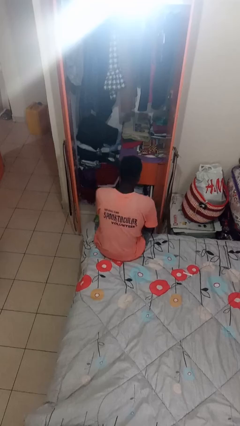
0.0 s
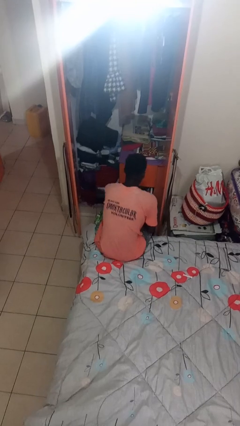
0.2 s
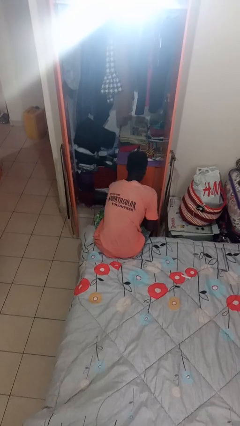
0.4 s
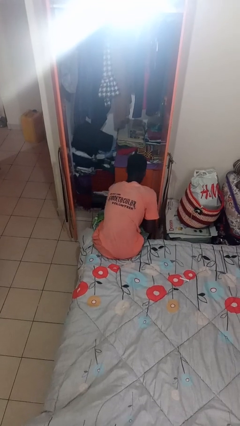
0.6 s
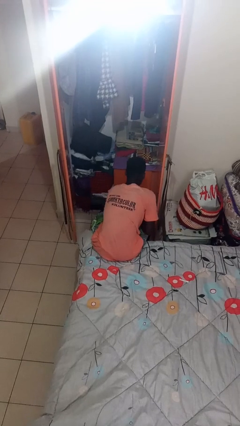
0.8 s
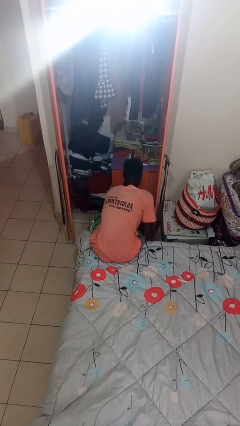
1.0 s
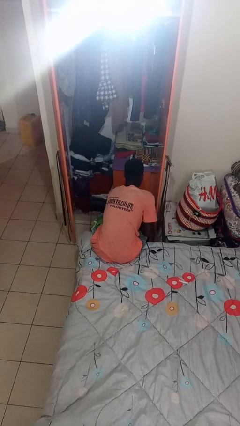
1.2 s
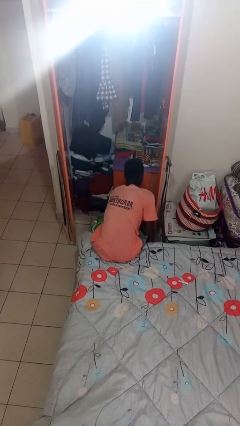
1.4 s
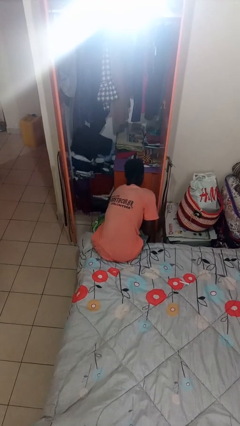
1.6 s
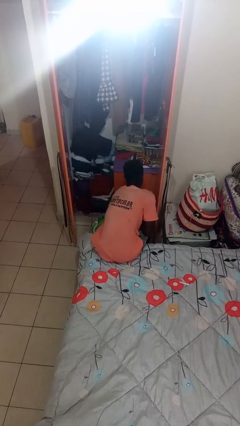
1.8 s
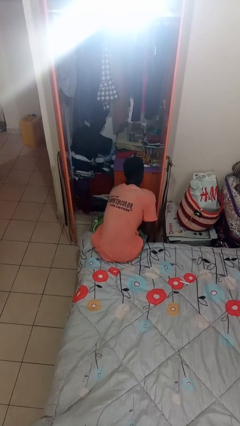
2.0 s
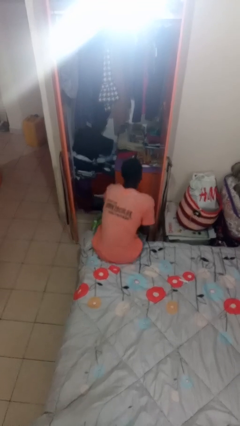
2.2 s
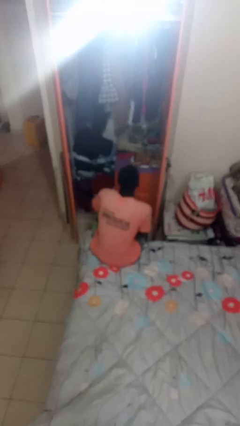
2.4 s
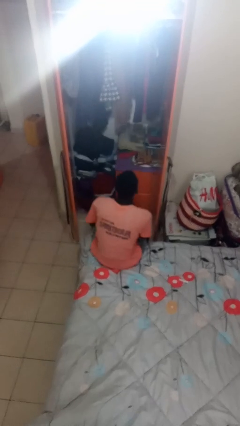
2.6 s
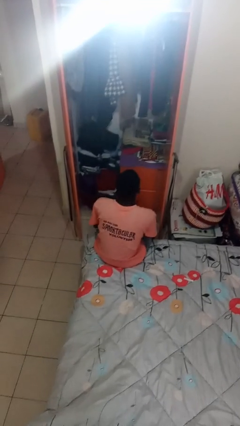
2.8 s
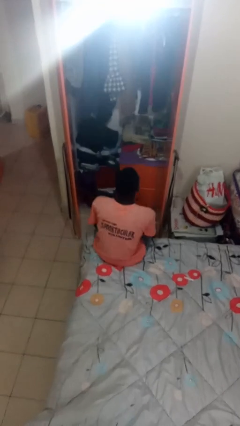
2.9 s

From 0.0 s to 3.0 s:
person closes dresser drawer

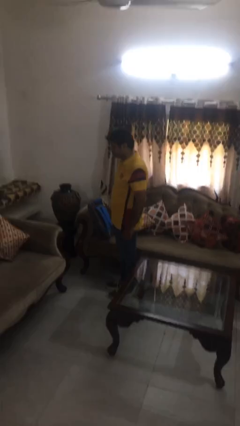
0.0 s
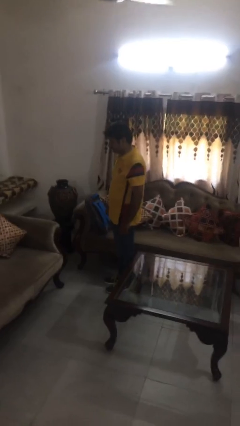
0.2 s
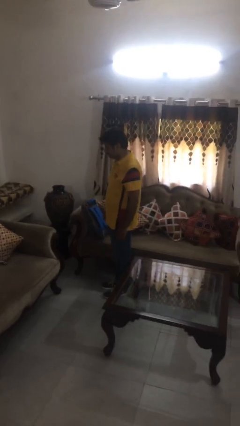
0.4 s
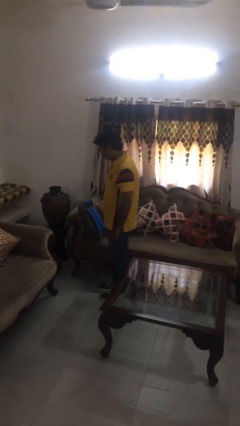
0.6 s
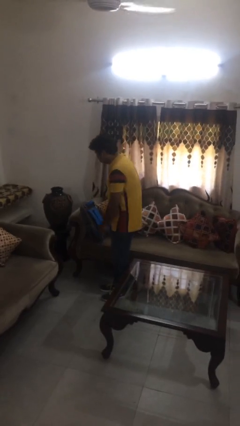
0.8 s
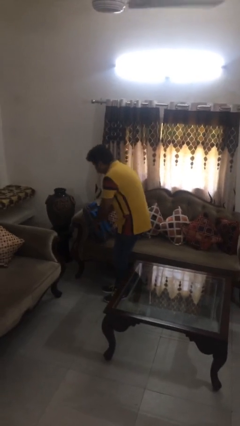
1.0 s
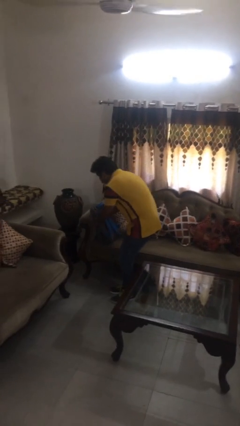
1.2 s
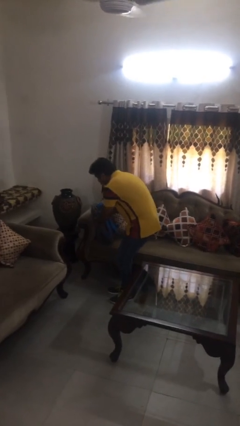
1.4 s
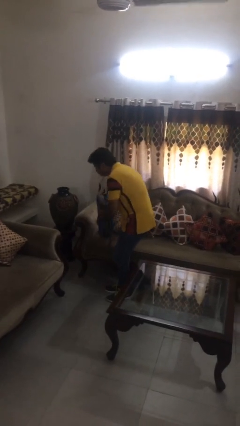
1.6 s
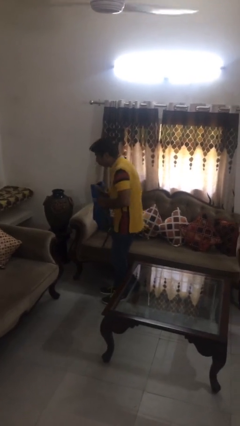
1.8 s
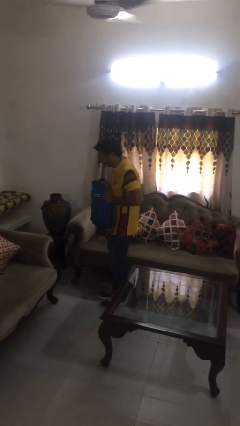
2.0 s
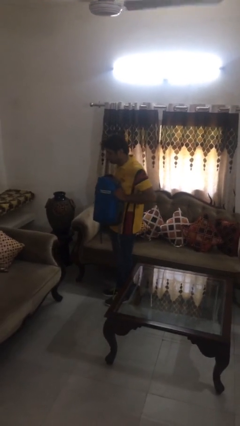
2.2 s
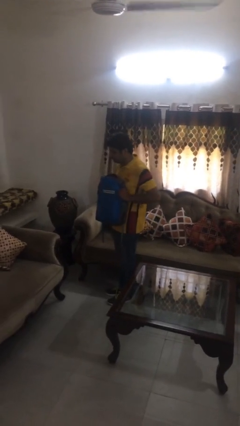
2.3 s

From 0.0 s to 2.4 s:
person picks up object from couch

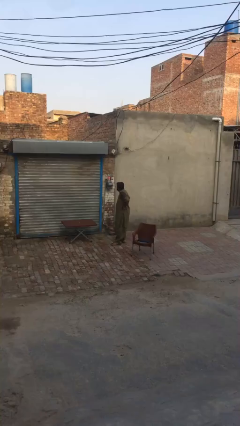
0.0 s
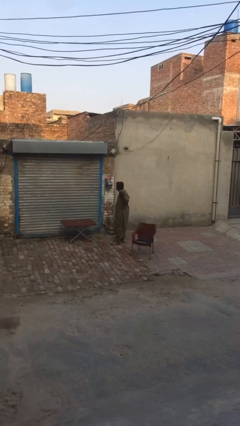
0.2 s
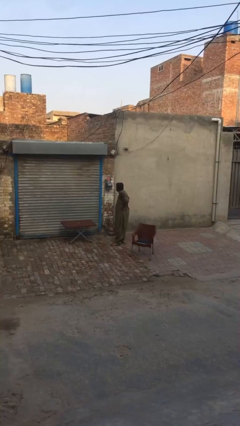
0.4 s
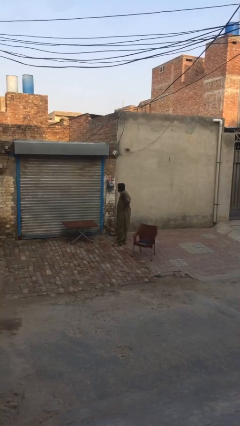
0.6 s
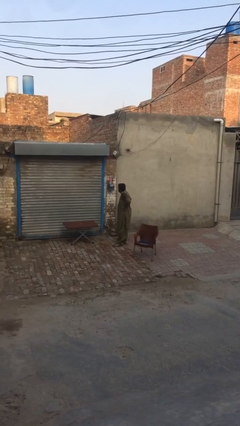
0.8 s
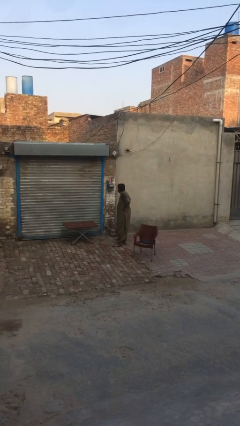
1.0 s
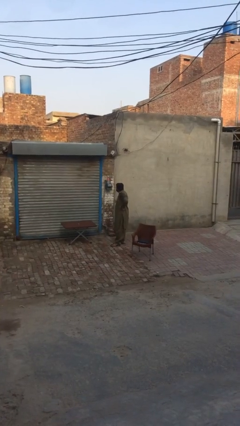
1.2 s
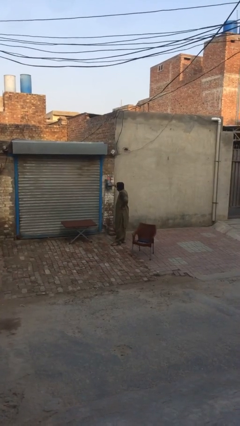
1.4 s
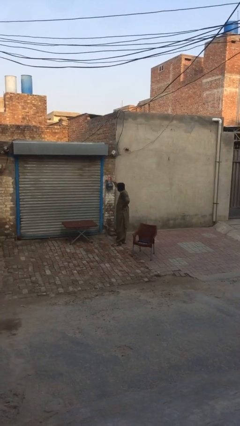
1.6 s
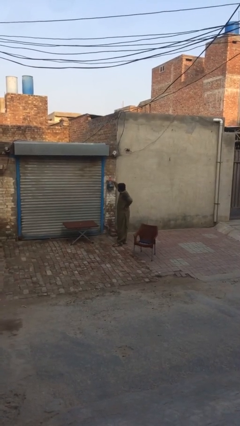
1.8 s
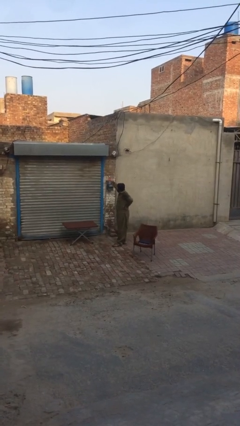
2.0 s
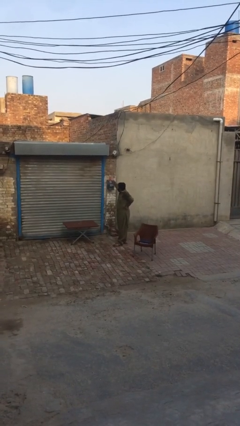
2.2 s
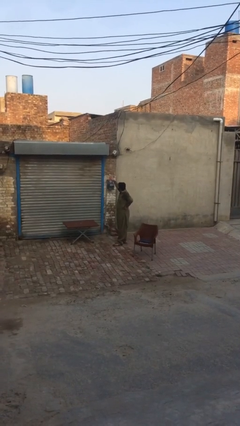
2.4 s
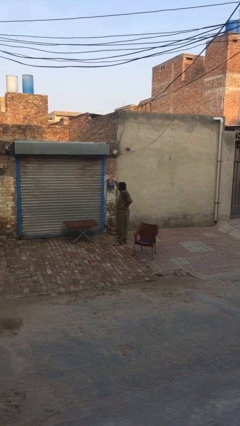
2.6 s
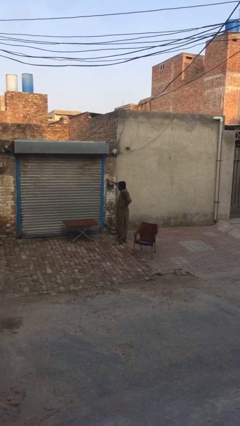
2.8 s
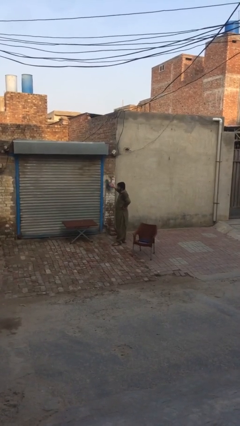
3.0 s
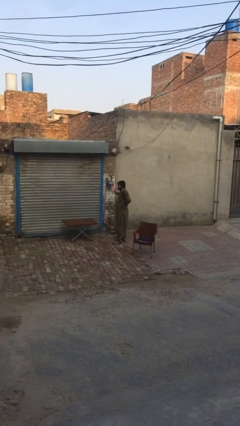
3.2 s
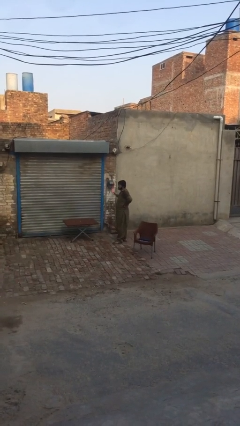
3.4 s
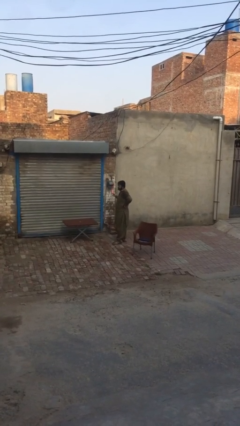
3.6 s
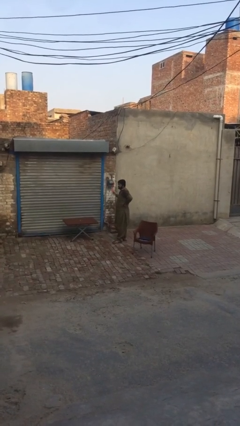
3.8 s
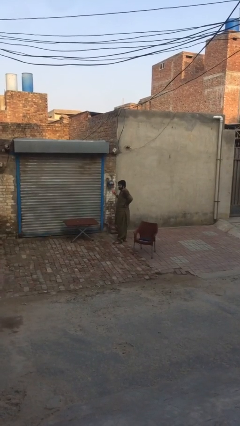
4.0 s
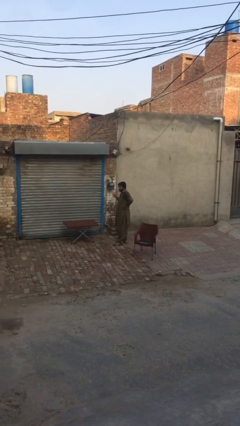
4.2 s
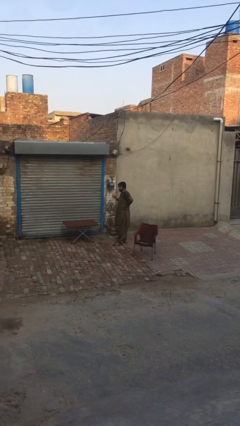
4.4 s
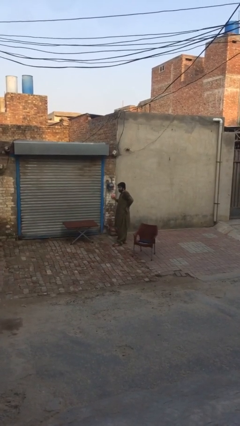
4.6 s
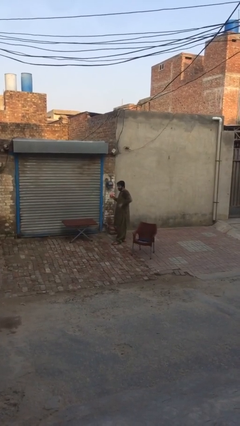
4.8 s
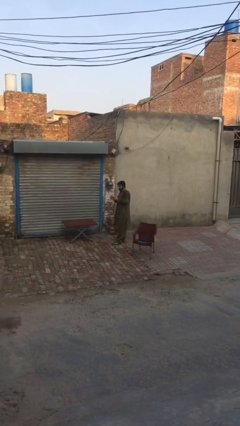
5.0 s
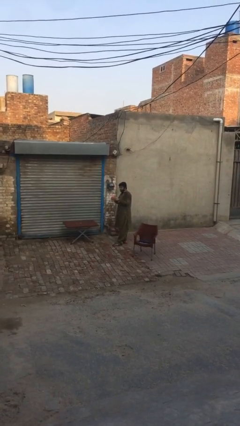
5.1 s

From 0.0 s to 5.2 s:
person picks up object from shelf

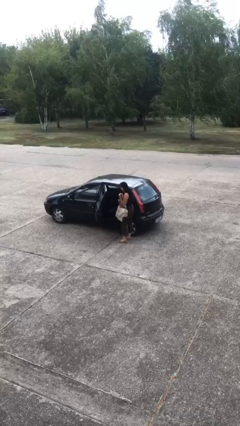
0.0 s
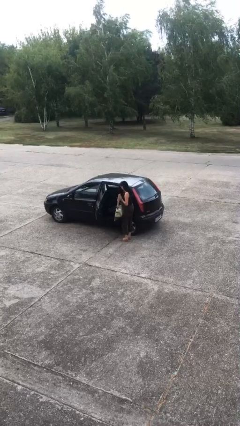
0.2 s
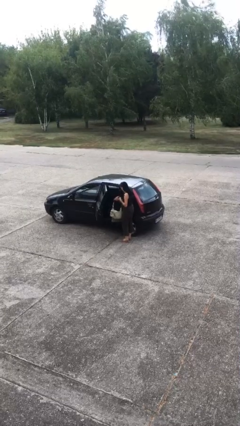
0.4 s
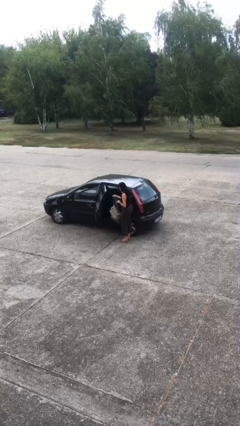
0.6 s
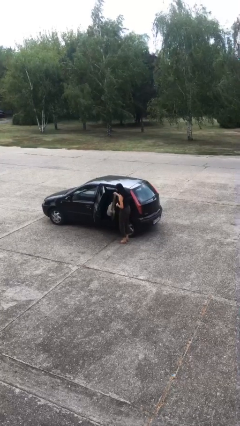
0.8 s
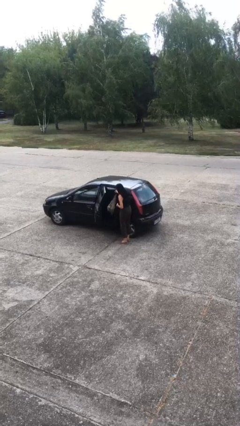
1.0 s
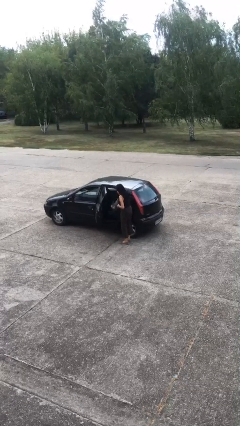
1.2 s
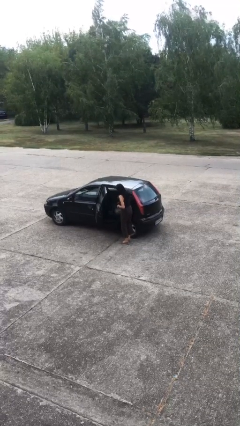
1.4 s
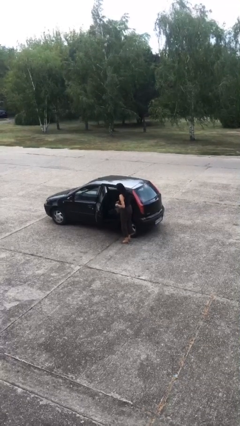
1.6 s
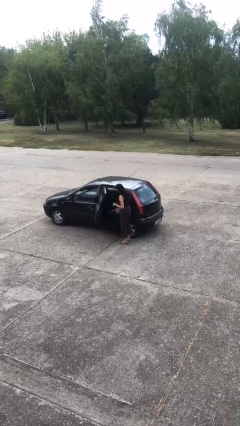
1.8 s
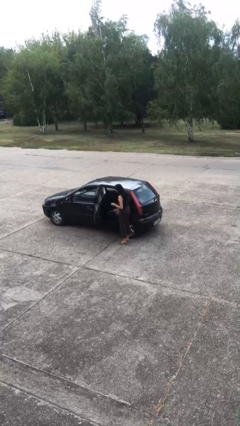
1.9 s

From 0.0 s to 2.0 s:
person loads car

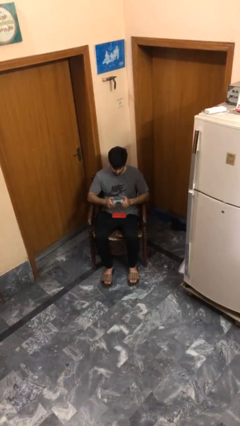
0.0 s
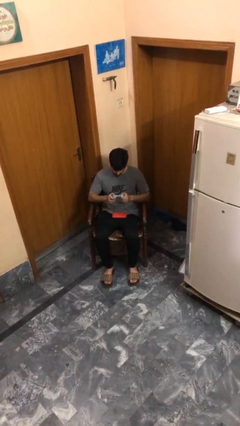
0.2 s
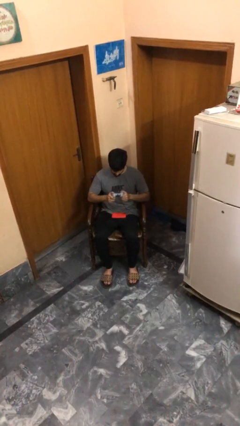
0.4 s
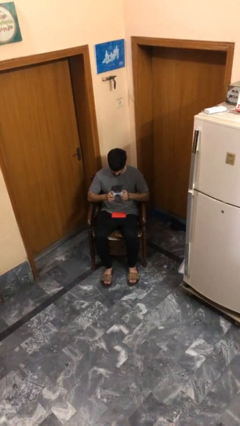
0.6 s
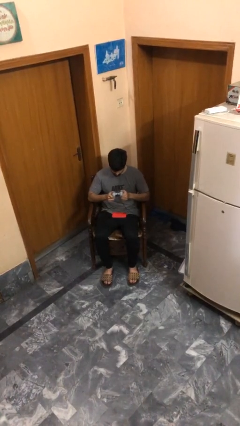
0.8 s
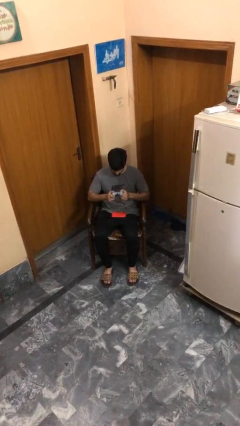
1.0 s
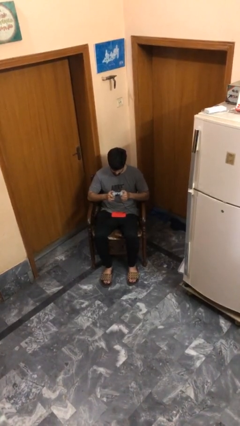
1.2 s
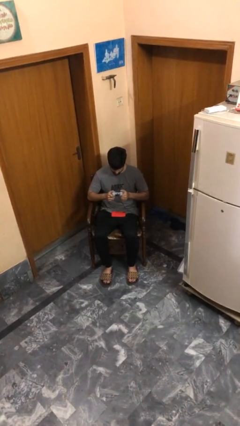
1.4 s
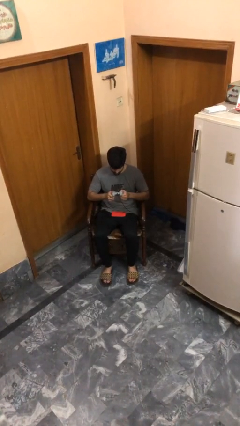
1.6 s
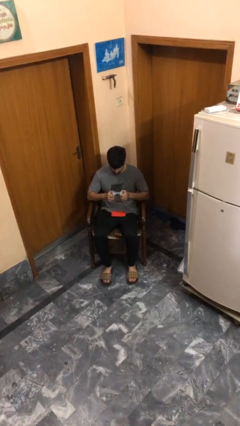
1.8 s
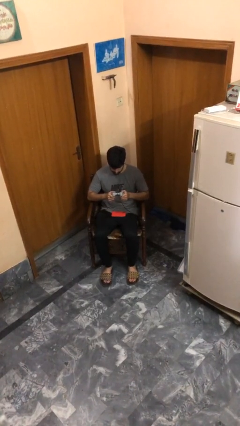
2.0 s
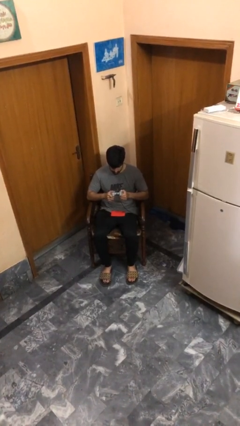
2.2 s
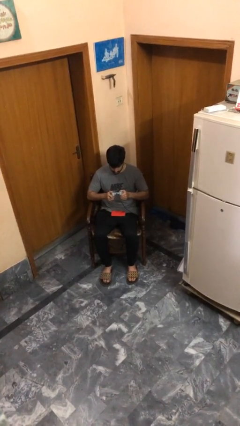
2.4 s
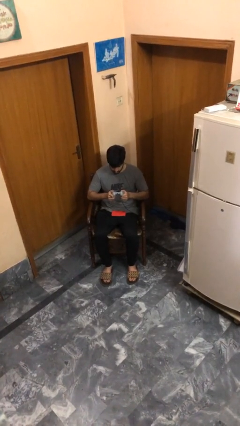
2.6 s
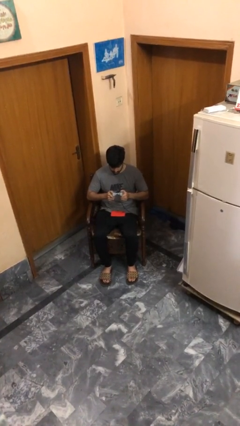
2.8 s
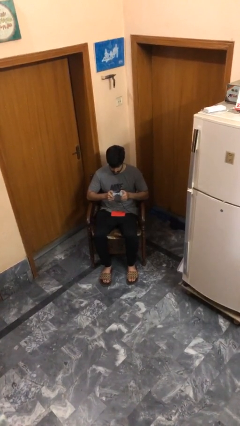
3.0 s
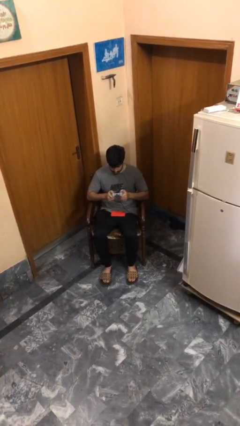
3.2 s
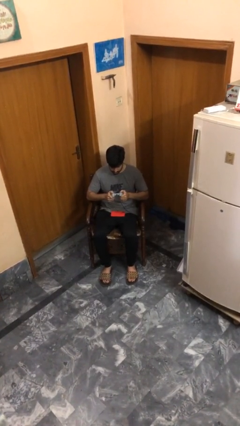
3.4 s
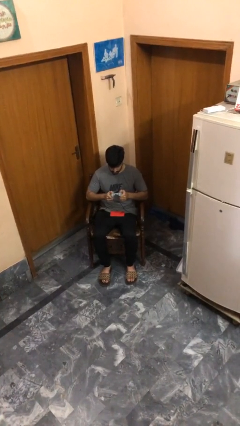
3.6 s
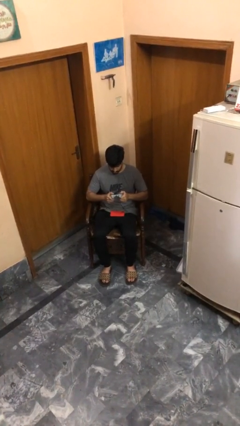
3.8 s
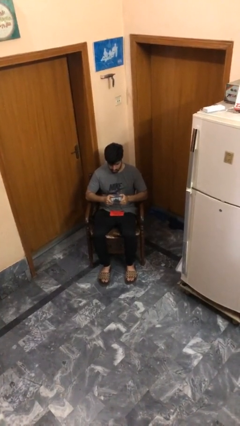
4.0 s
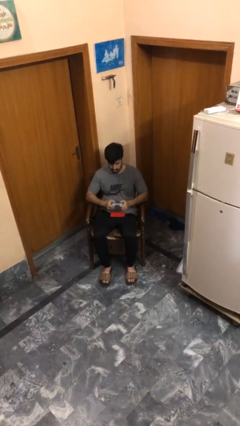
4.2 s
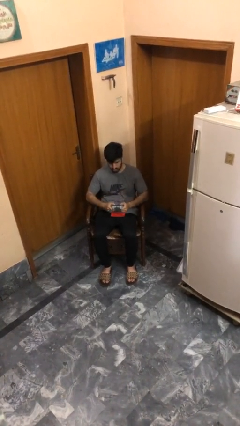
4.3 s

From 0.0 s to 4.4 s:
person interacts with handheld game

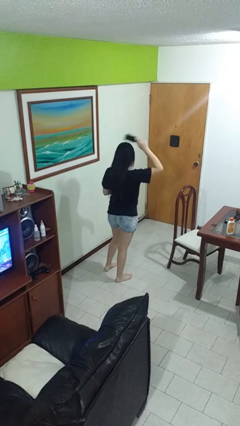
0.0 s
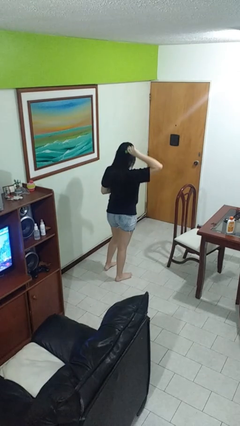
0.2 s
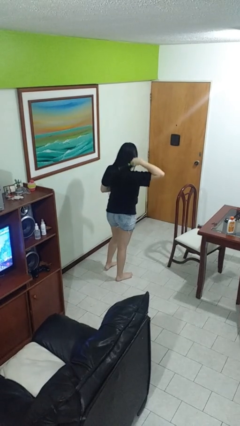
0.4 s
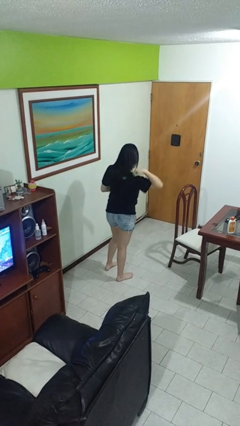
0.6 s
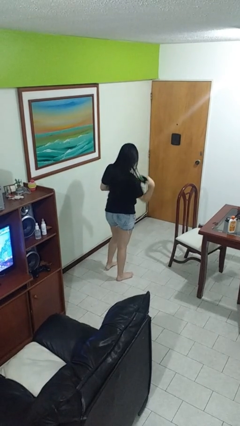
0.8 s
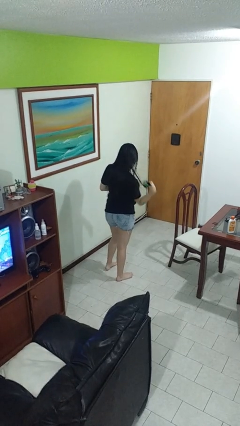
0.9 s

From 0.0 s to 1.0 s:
person brushes hair
